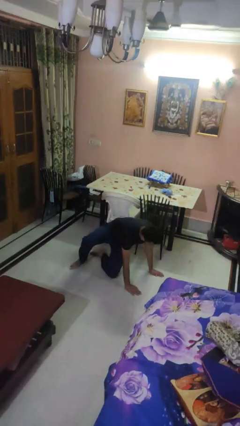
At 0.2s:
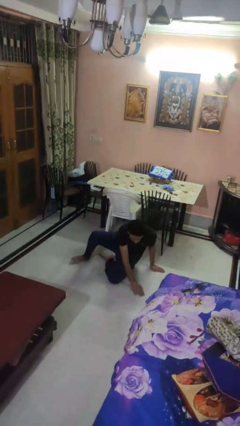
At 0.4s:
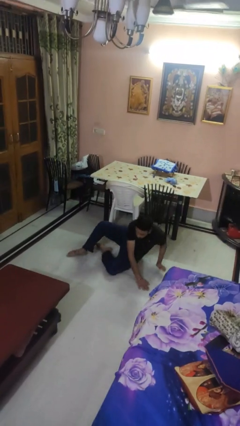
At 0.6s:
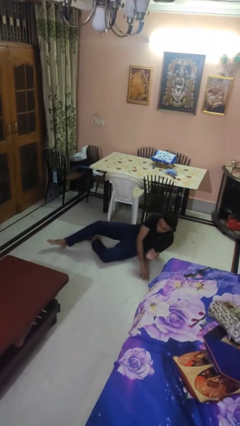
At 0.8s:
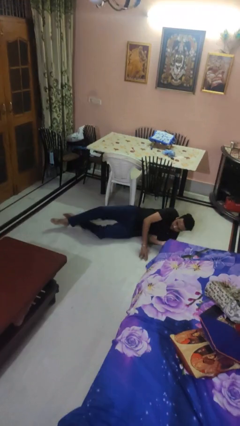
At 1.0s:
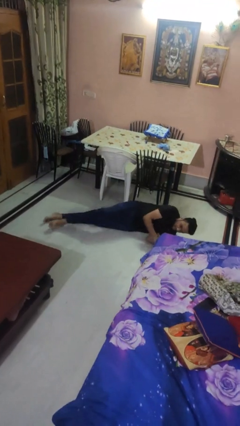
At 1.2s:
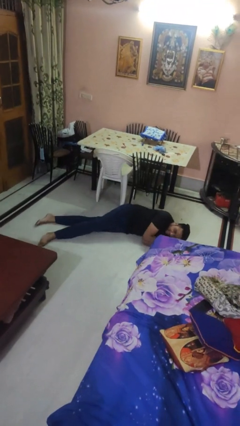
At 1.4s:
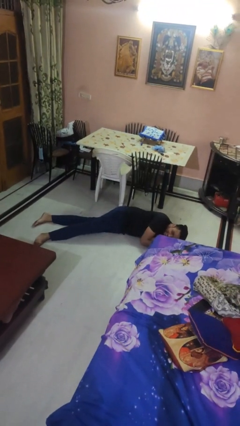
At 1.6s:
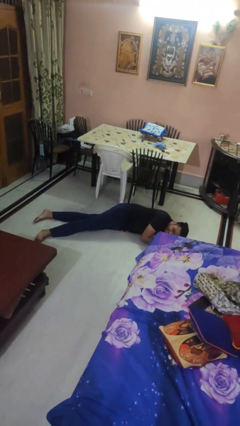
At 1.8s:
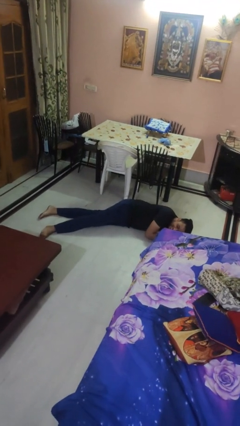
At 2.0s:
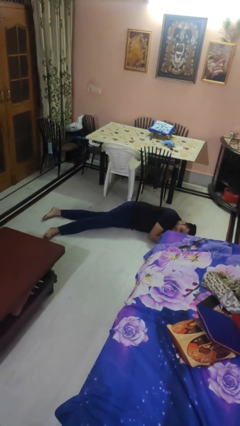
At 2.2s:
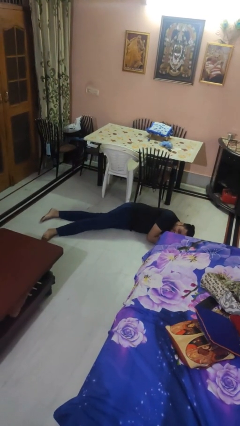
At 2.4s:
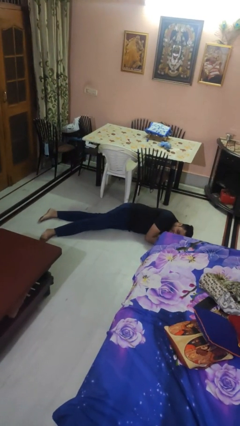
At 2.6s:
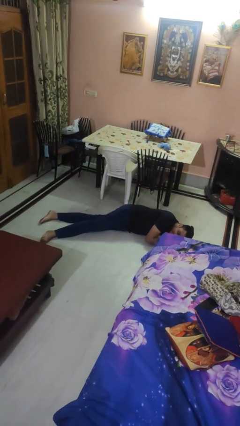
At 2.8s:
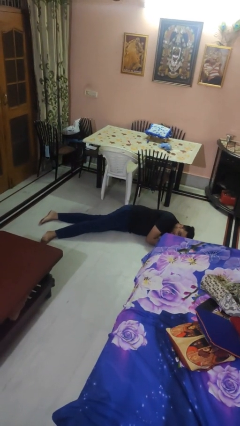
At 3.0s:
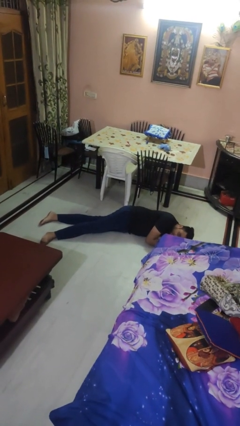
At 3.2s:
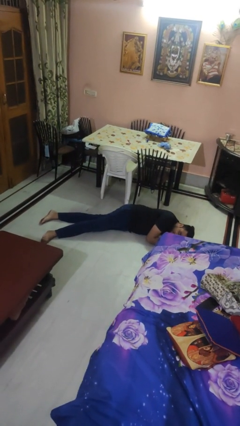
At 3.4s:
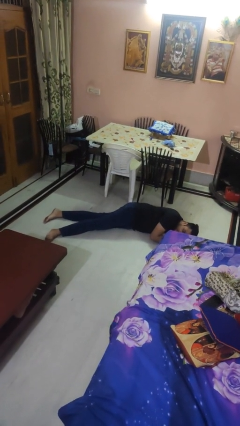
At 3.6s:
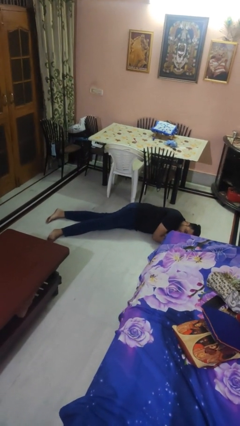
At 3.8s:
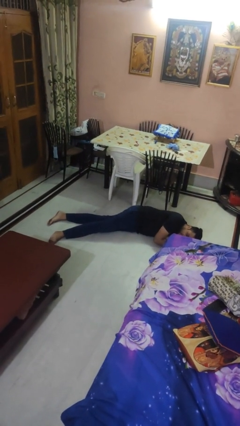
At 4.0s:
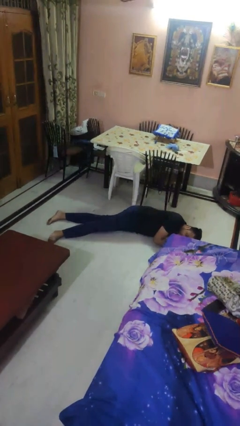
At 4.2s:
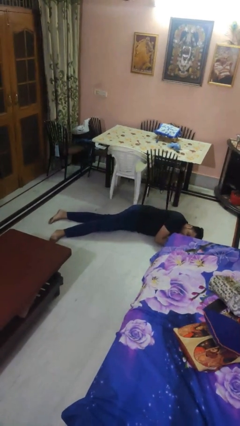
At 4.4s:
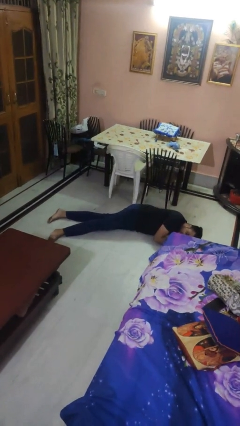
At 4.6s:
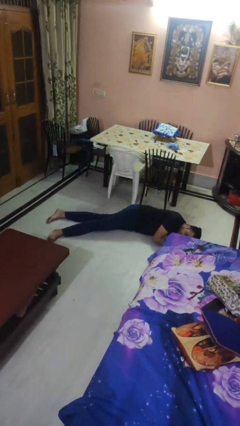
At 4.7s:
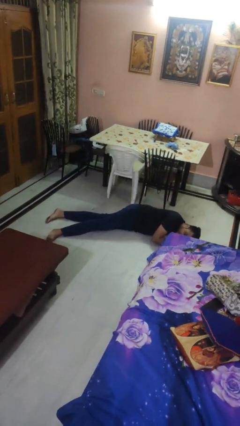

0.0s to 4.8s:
person lies down on floor

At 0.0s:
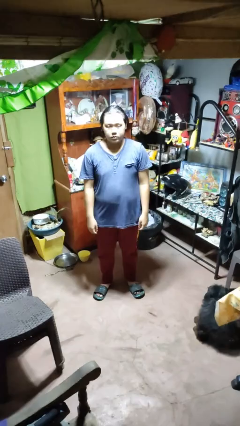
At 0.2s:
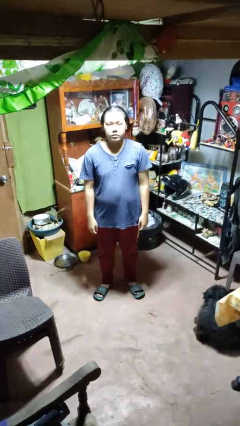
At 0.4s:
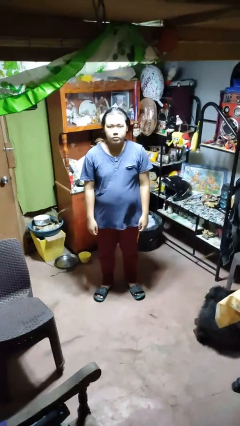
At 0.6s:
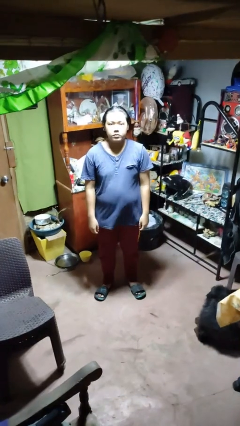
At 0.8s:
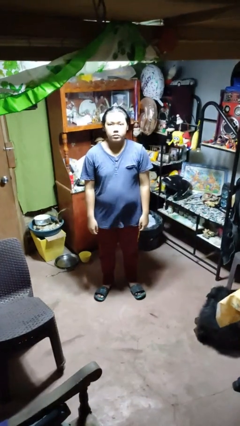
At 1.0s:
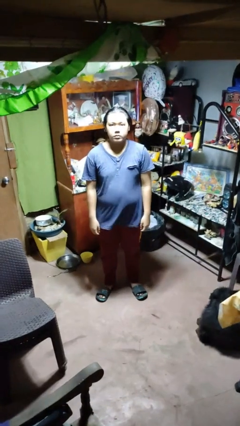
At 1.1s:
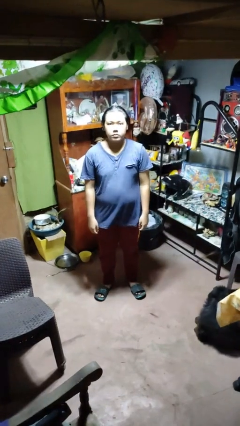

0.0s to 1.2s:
person nods head

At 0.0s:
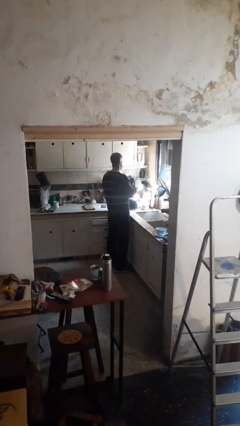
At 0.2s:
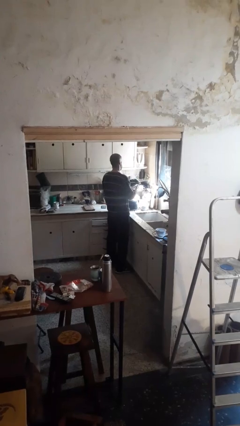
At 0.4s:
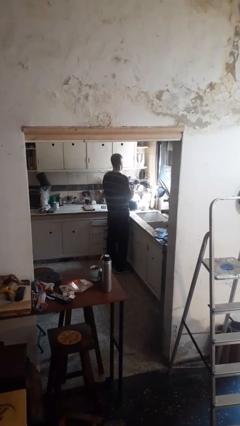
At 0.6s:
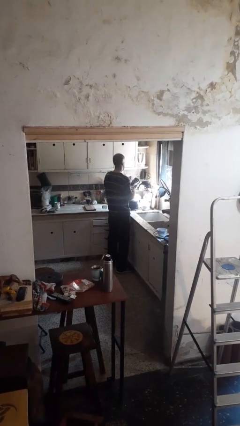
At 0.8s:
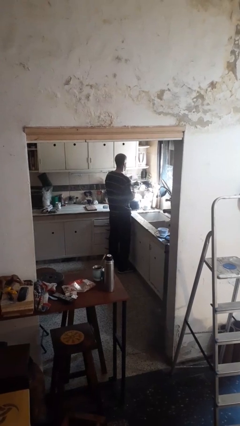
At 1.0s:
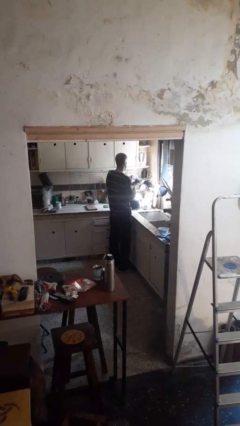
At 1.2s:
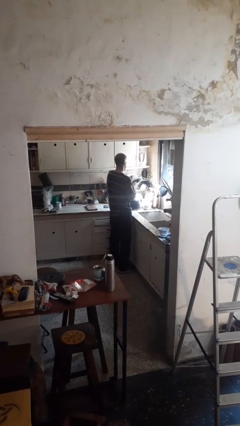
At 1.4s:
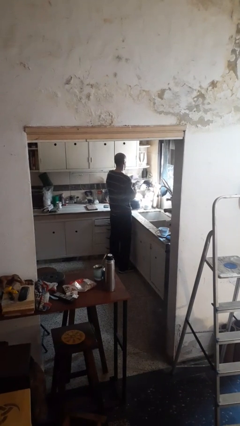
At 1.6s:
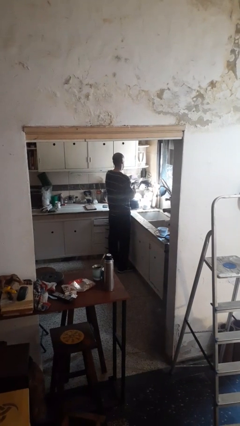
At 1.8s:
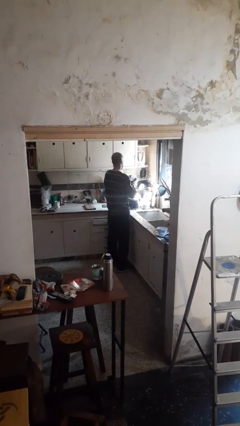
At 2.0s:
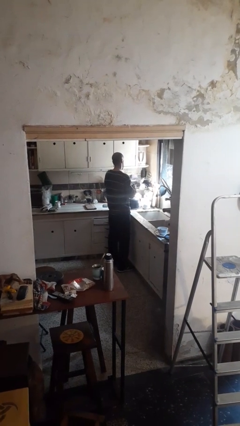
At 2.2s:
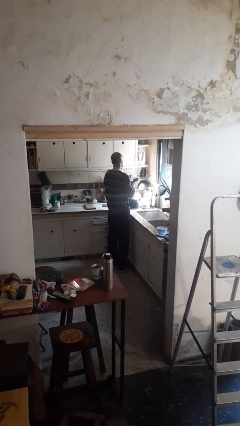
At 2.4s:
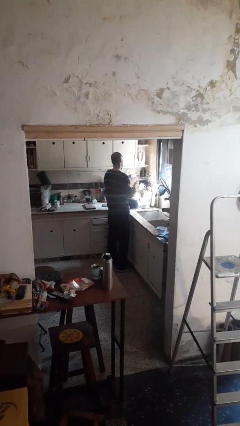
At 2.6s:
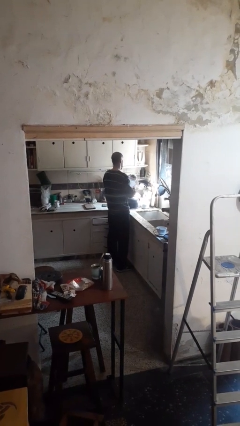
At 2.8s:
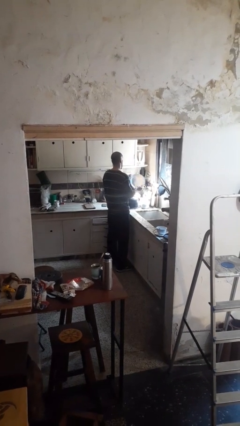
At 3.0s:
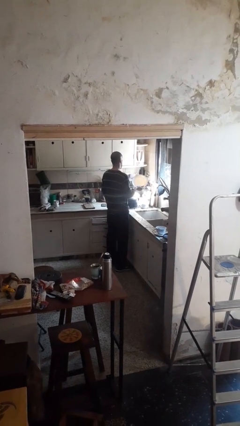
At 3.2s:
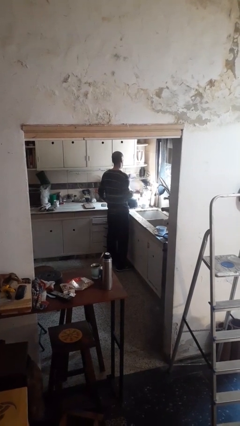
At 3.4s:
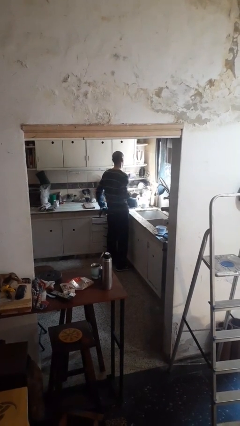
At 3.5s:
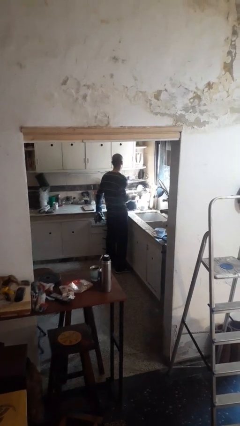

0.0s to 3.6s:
person dries dish

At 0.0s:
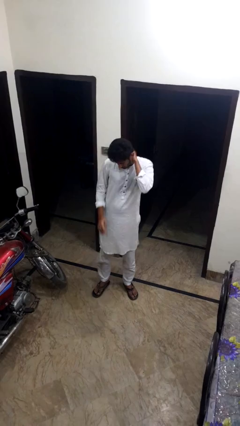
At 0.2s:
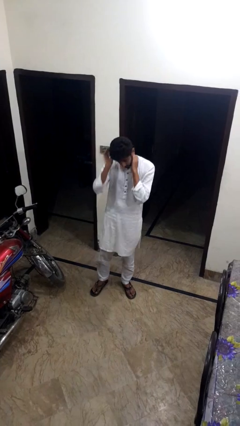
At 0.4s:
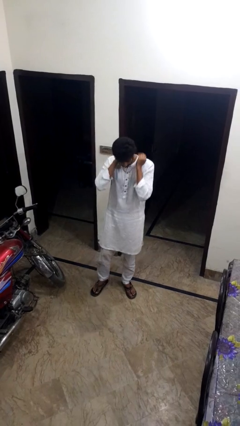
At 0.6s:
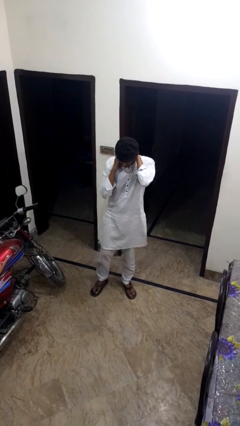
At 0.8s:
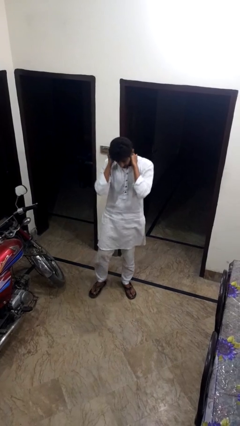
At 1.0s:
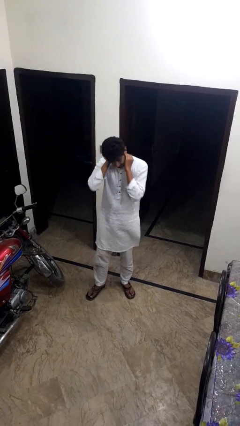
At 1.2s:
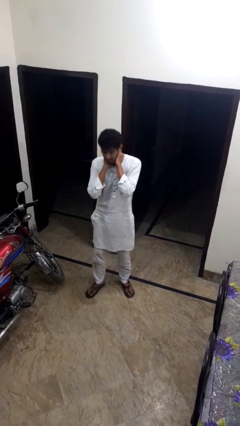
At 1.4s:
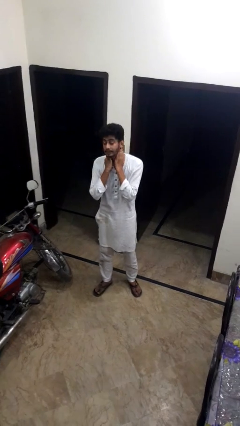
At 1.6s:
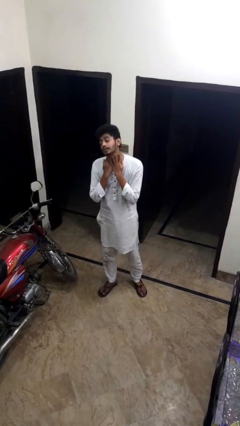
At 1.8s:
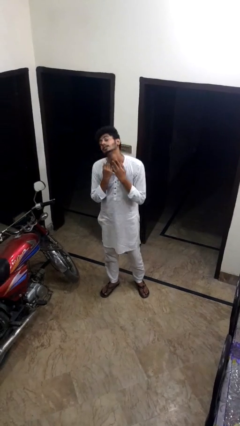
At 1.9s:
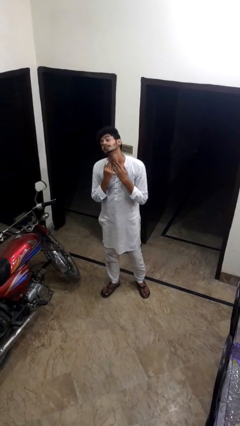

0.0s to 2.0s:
person rubs neck

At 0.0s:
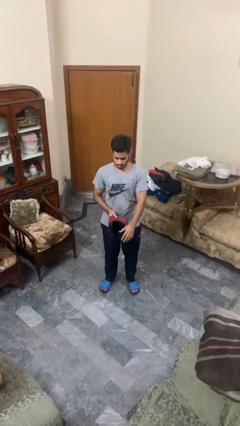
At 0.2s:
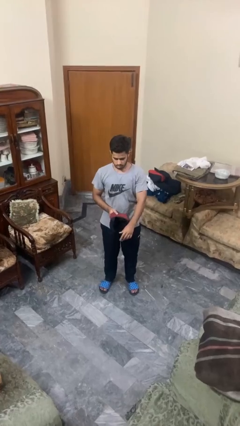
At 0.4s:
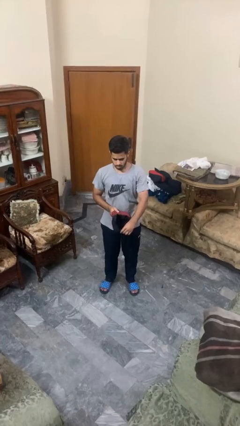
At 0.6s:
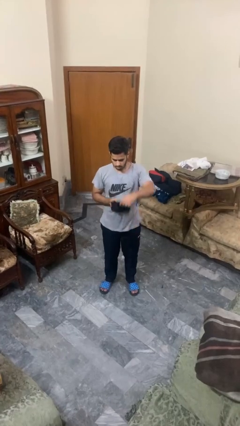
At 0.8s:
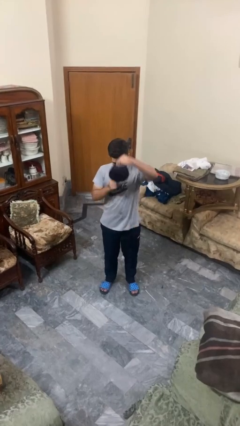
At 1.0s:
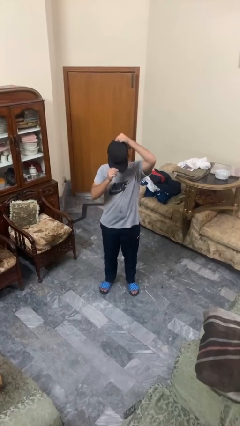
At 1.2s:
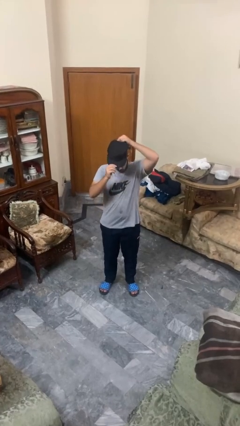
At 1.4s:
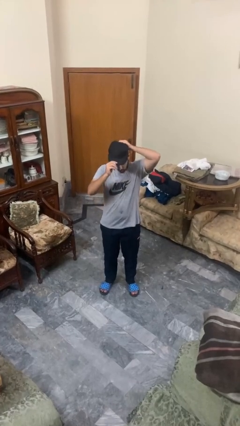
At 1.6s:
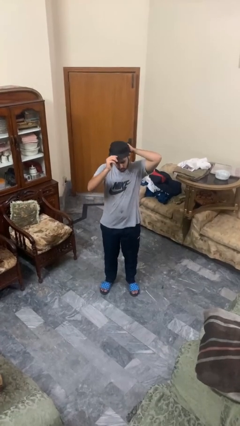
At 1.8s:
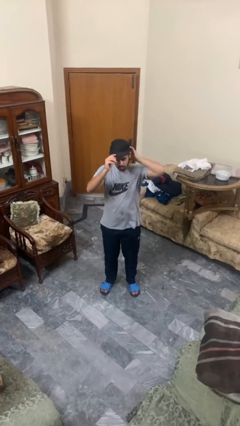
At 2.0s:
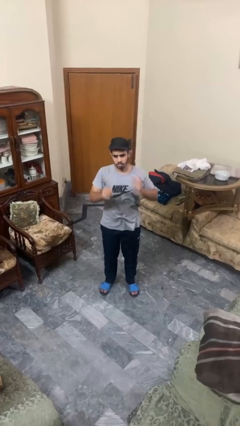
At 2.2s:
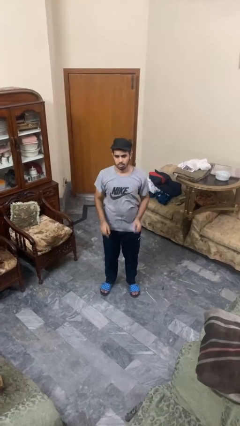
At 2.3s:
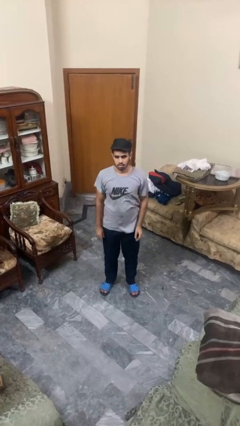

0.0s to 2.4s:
person puts on hat

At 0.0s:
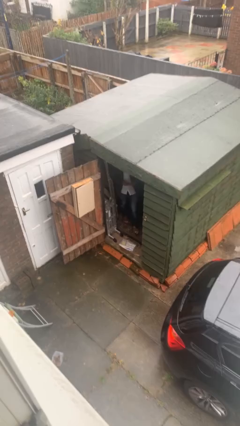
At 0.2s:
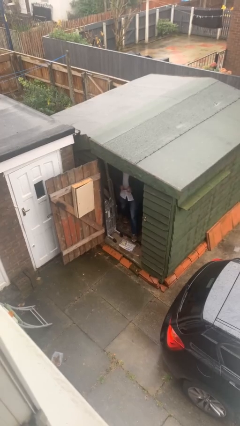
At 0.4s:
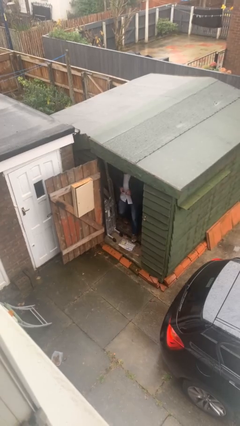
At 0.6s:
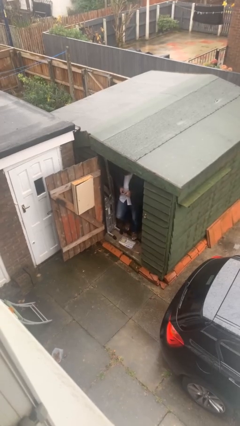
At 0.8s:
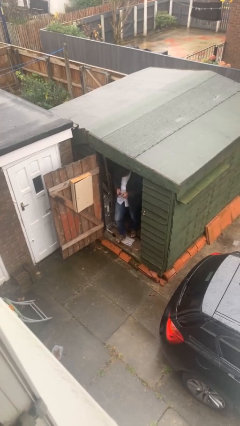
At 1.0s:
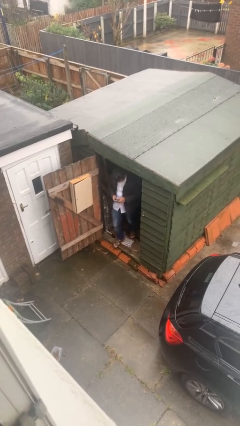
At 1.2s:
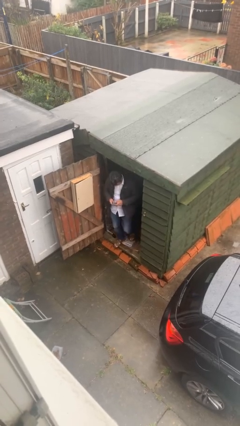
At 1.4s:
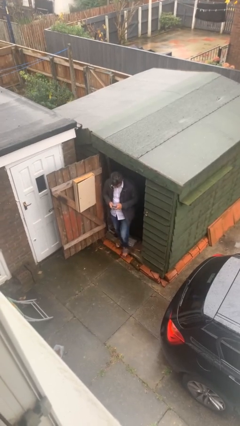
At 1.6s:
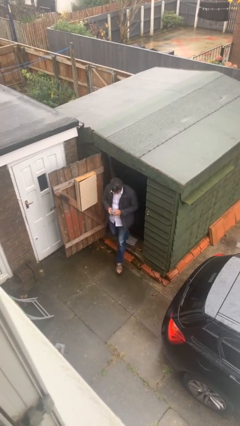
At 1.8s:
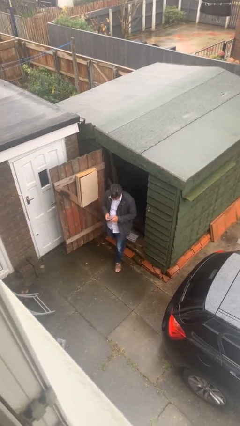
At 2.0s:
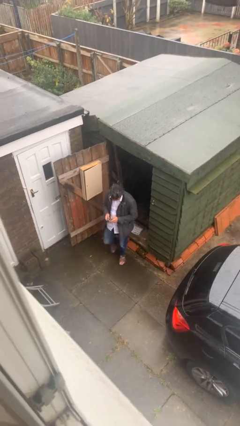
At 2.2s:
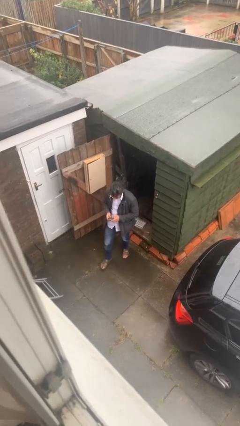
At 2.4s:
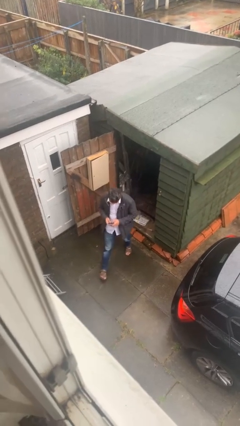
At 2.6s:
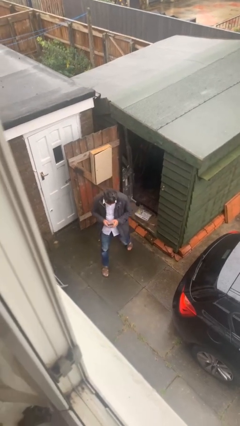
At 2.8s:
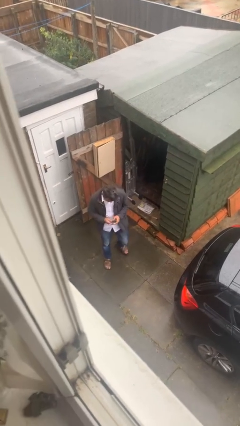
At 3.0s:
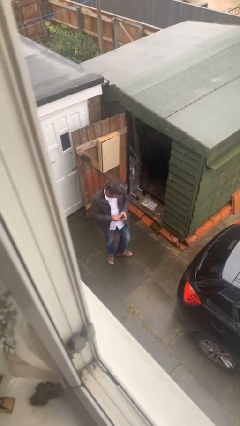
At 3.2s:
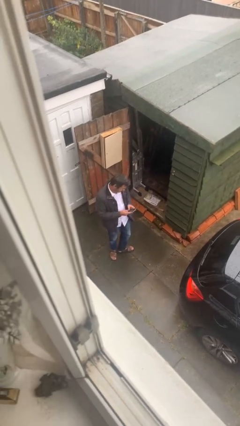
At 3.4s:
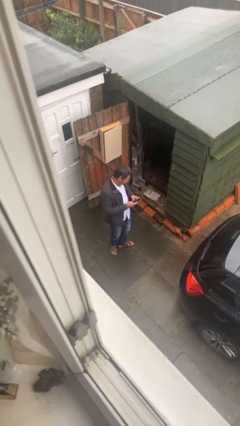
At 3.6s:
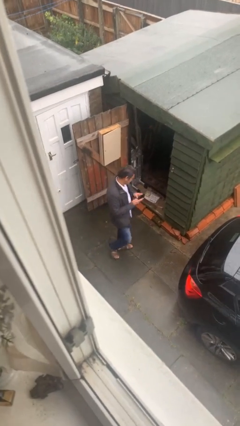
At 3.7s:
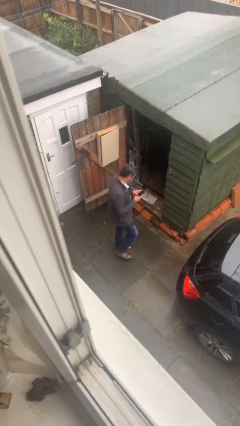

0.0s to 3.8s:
person enters scene through structure
